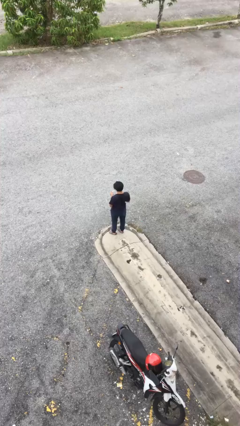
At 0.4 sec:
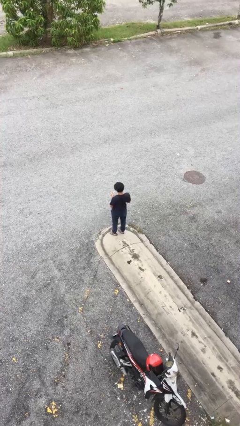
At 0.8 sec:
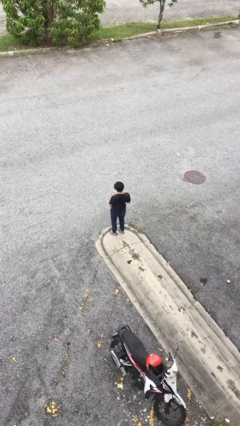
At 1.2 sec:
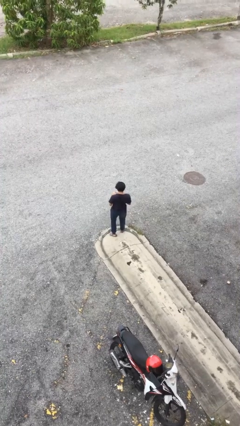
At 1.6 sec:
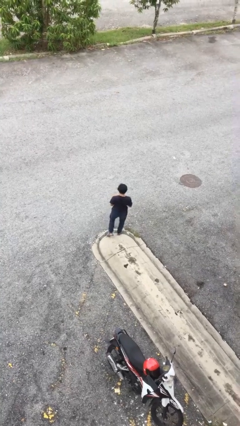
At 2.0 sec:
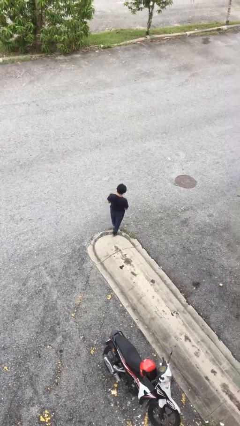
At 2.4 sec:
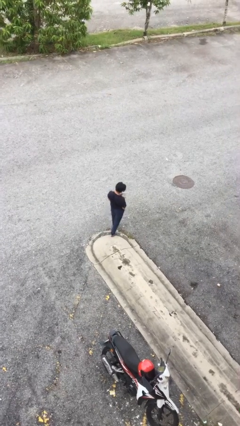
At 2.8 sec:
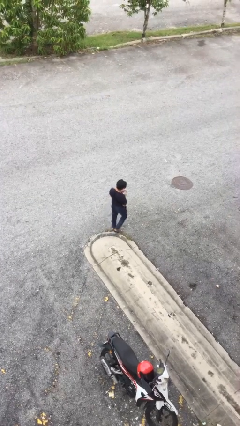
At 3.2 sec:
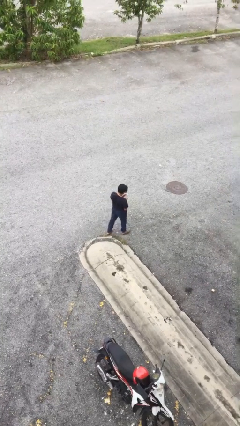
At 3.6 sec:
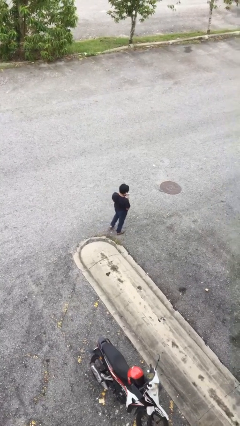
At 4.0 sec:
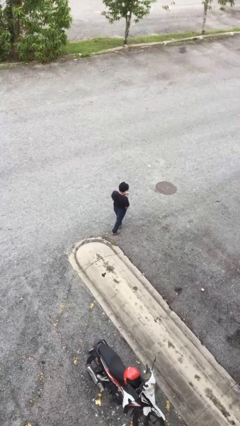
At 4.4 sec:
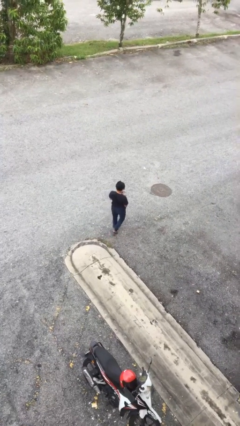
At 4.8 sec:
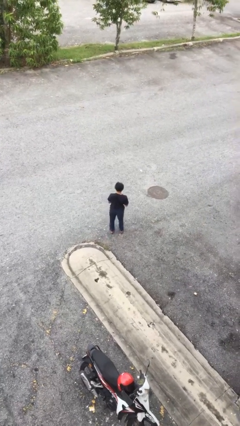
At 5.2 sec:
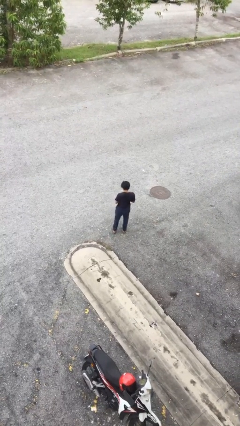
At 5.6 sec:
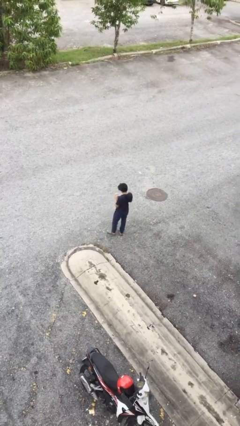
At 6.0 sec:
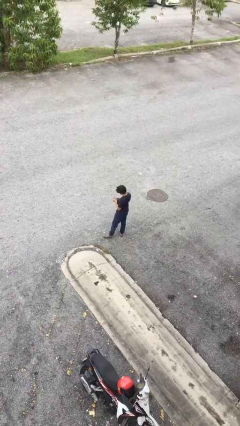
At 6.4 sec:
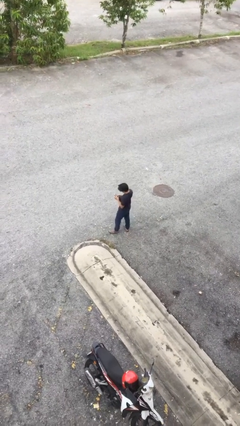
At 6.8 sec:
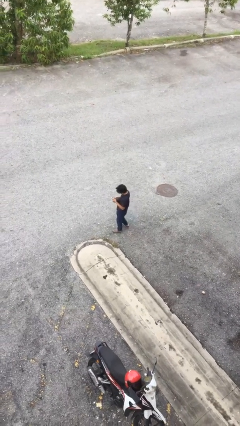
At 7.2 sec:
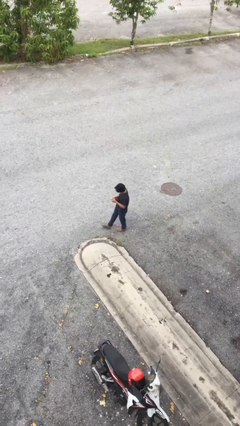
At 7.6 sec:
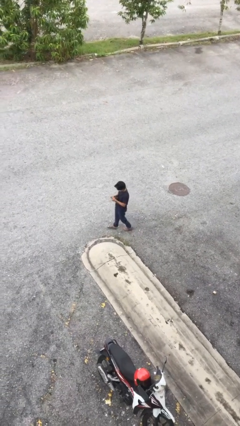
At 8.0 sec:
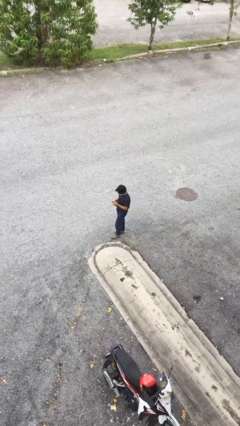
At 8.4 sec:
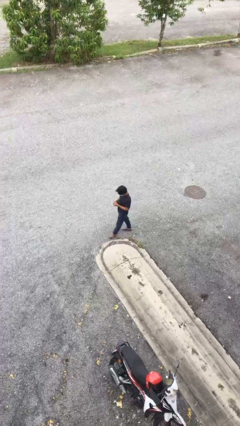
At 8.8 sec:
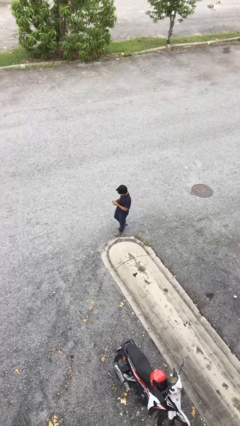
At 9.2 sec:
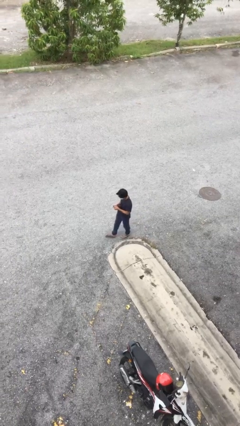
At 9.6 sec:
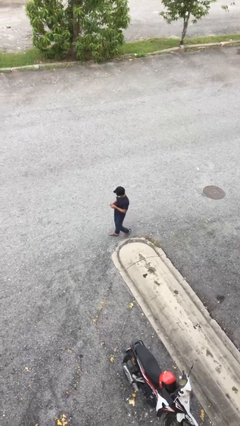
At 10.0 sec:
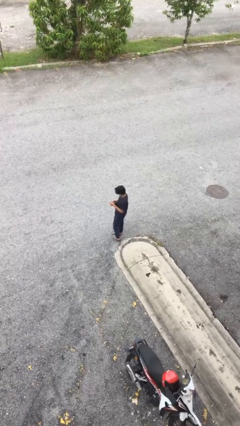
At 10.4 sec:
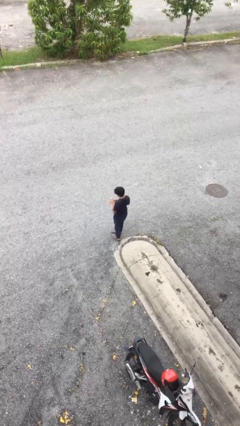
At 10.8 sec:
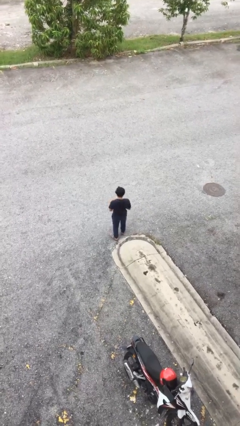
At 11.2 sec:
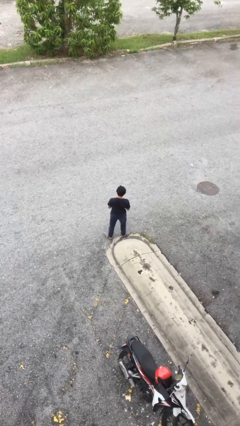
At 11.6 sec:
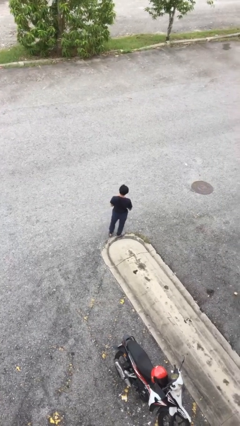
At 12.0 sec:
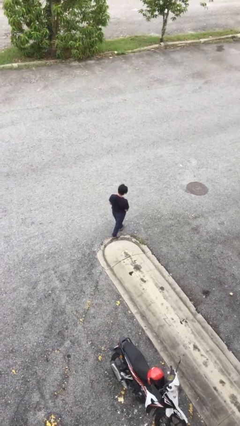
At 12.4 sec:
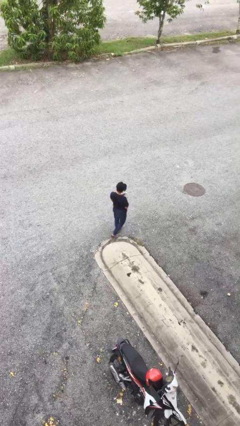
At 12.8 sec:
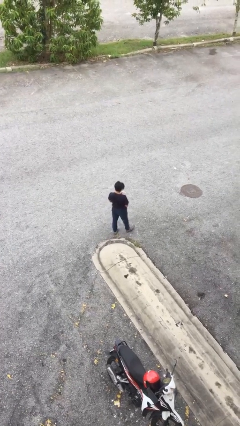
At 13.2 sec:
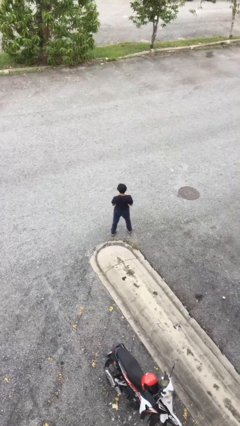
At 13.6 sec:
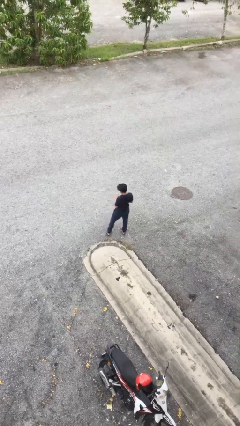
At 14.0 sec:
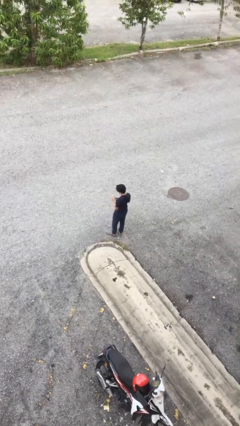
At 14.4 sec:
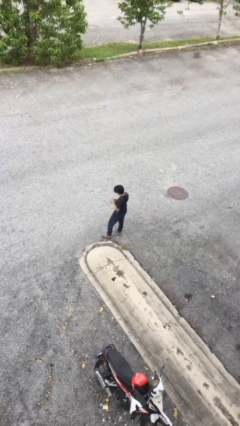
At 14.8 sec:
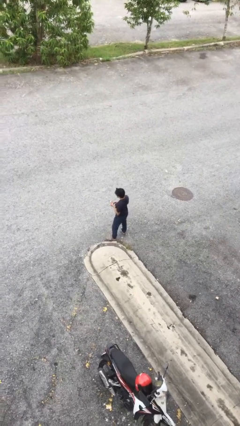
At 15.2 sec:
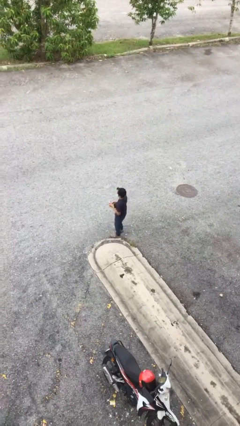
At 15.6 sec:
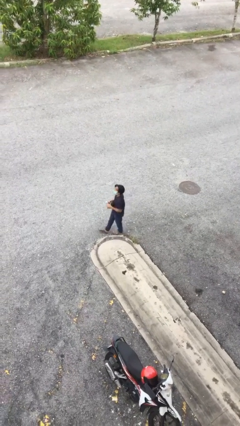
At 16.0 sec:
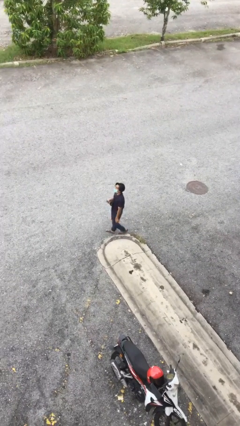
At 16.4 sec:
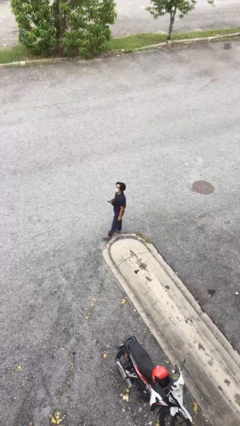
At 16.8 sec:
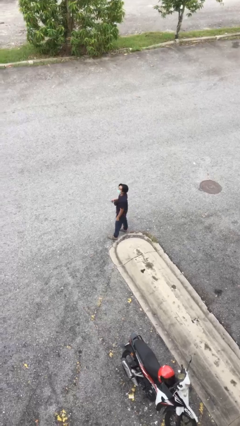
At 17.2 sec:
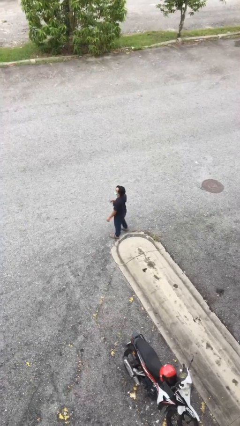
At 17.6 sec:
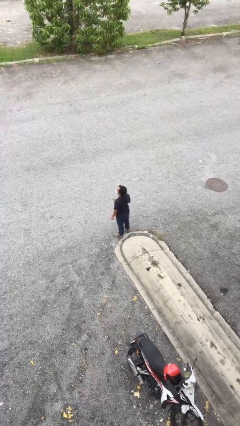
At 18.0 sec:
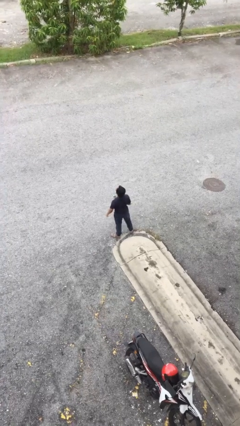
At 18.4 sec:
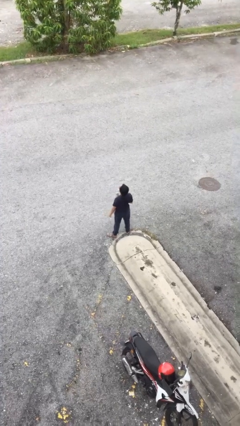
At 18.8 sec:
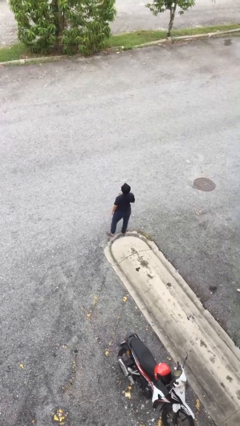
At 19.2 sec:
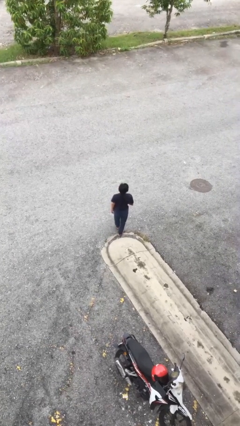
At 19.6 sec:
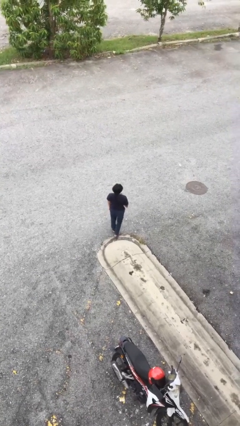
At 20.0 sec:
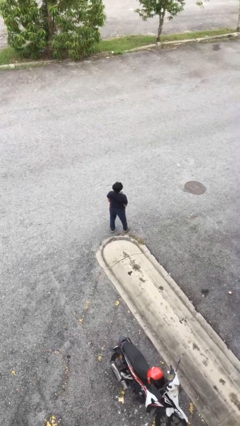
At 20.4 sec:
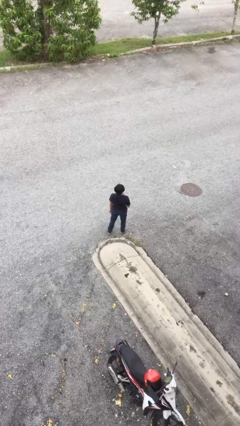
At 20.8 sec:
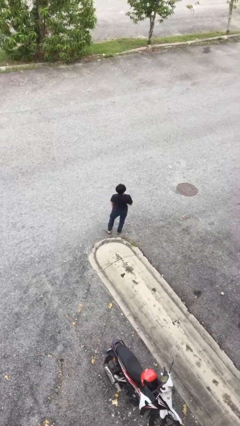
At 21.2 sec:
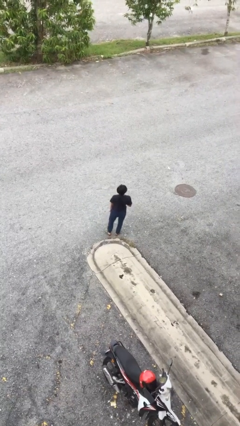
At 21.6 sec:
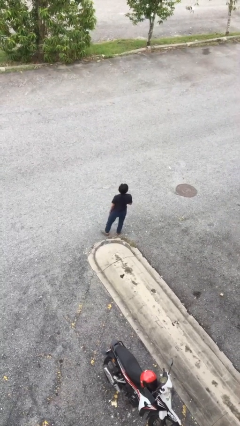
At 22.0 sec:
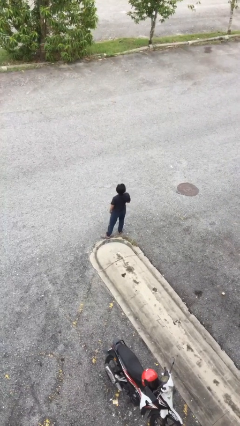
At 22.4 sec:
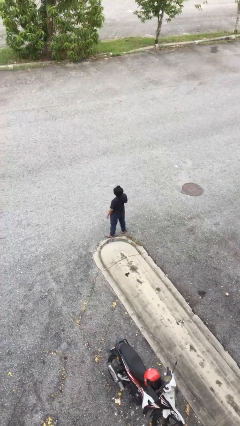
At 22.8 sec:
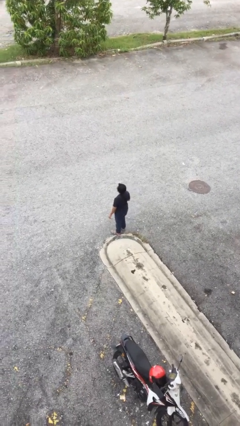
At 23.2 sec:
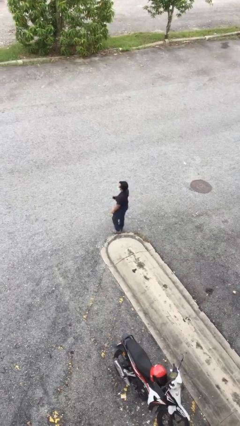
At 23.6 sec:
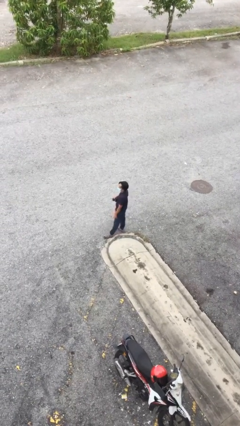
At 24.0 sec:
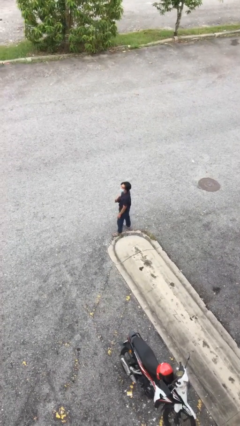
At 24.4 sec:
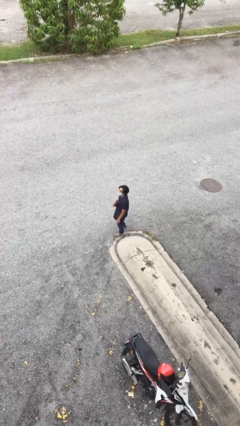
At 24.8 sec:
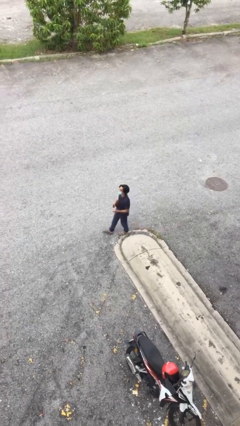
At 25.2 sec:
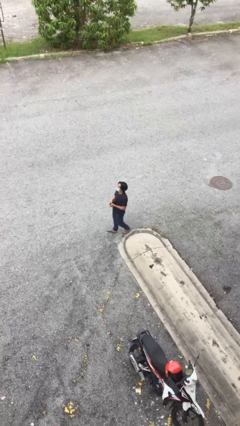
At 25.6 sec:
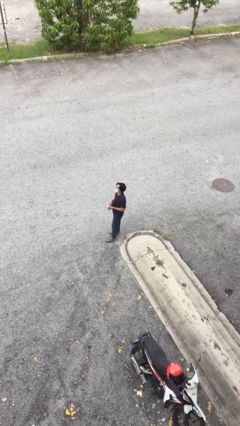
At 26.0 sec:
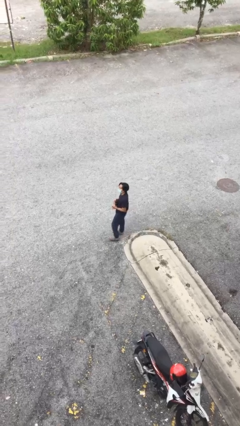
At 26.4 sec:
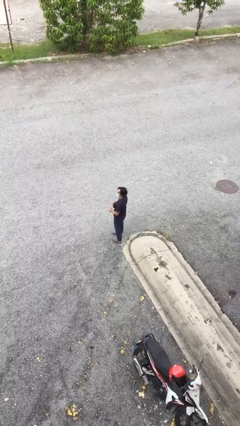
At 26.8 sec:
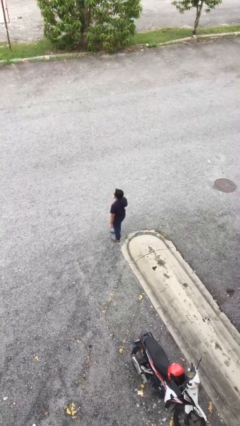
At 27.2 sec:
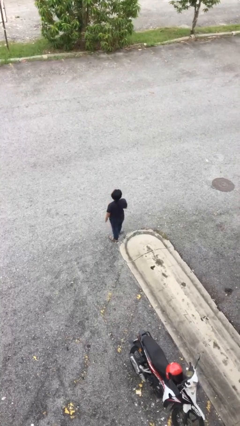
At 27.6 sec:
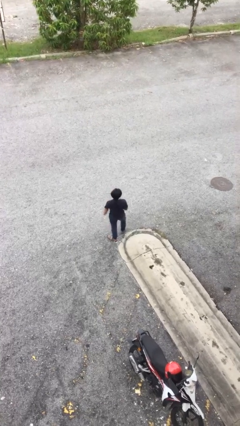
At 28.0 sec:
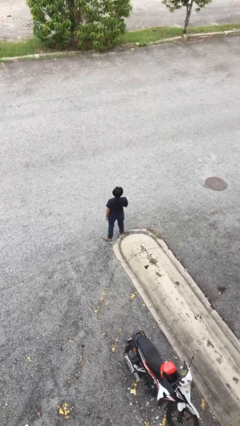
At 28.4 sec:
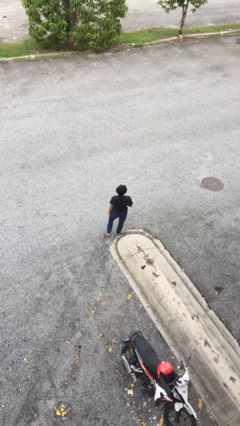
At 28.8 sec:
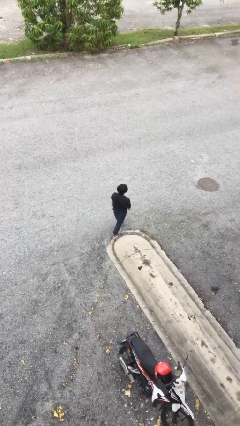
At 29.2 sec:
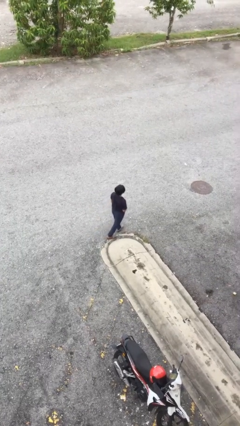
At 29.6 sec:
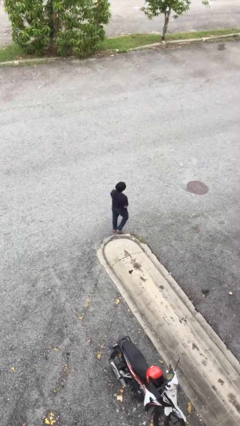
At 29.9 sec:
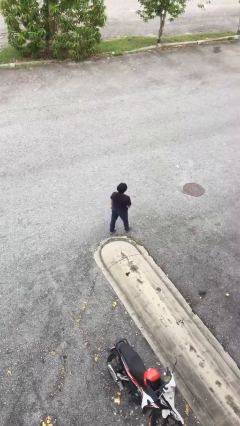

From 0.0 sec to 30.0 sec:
person walks

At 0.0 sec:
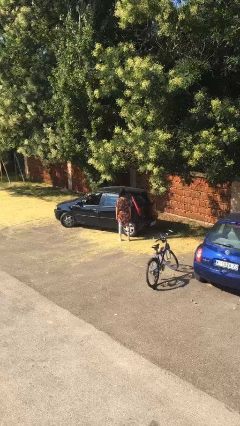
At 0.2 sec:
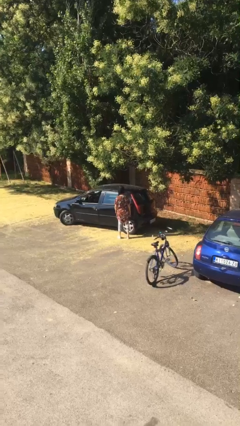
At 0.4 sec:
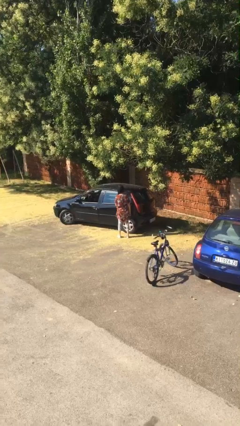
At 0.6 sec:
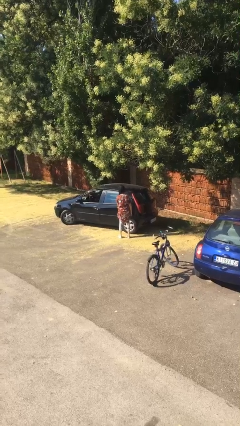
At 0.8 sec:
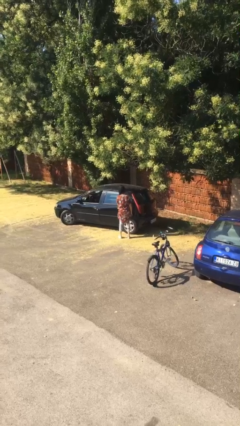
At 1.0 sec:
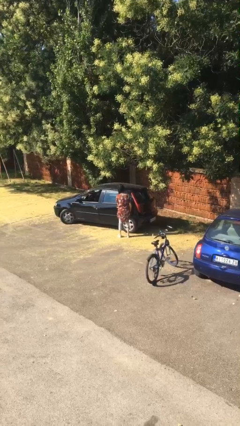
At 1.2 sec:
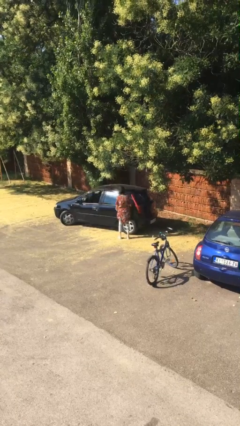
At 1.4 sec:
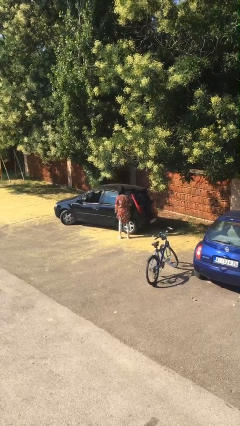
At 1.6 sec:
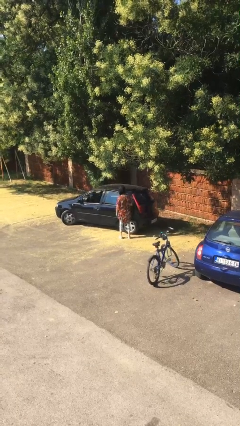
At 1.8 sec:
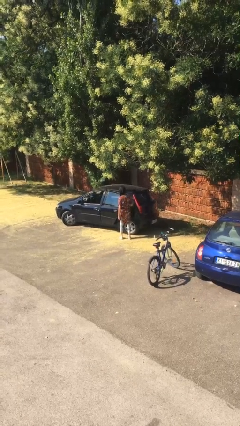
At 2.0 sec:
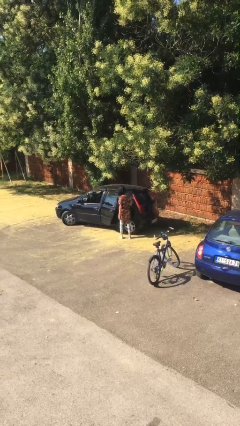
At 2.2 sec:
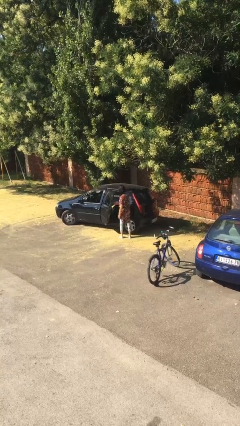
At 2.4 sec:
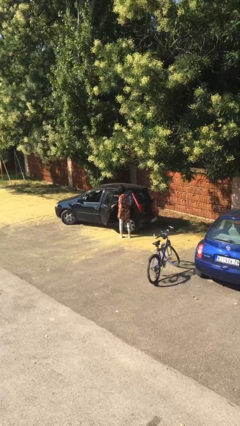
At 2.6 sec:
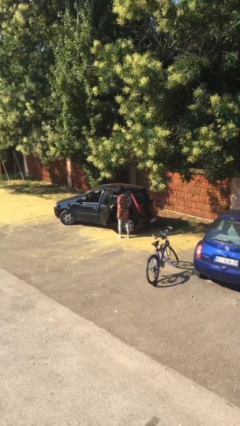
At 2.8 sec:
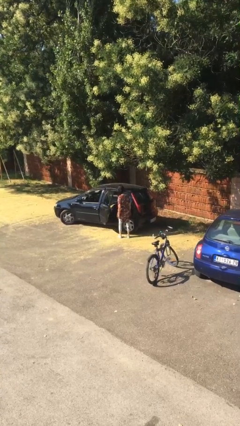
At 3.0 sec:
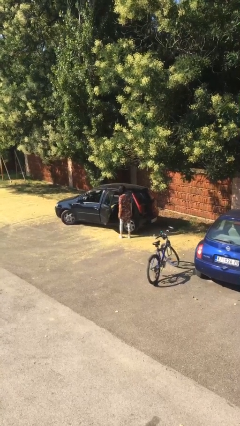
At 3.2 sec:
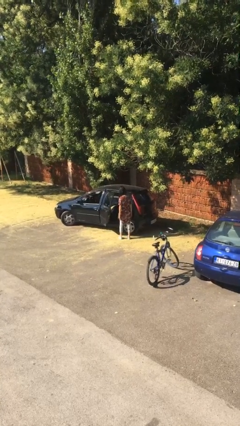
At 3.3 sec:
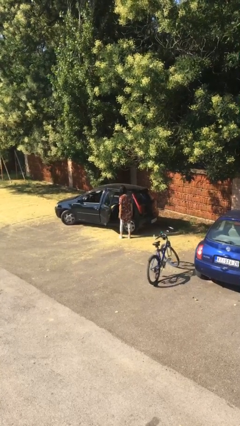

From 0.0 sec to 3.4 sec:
person opens car door
